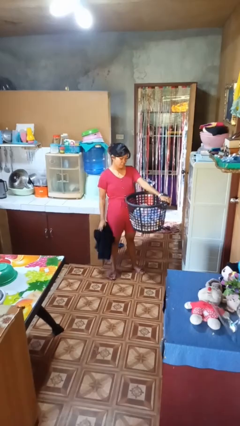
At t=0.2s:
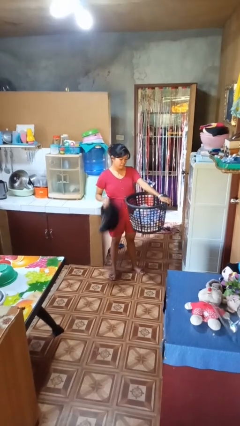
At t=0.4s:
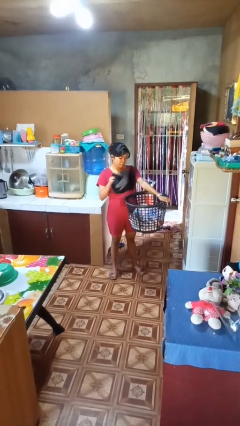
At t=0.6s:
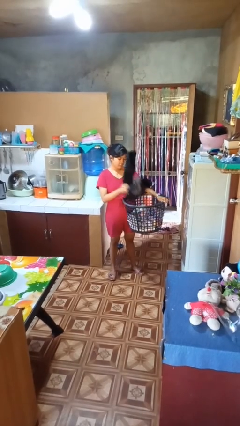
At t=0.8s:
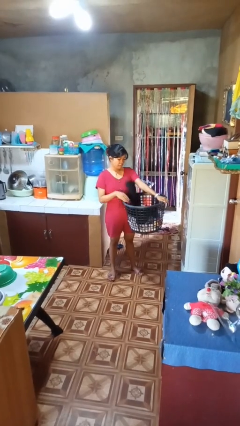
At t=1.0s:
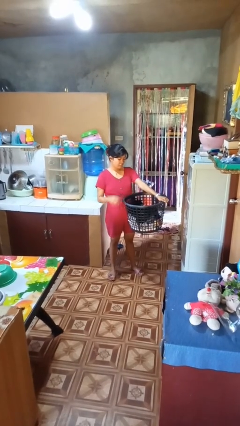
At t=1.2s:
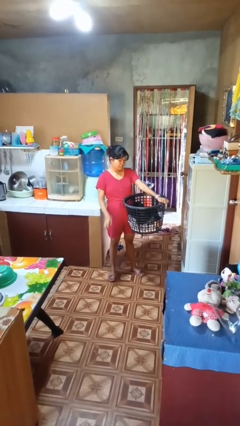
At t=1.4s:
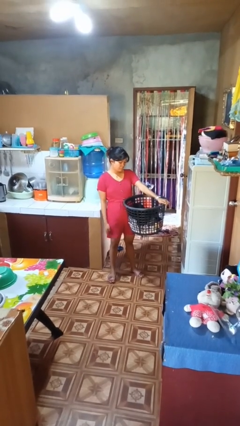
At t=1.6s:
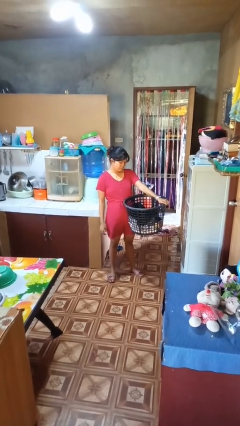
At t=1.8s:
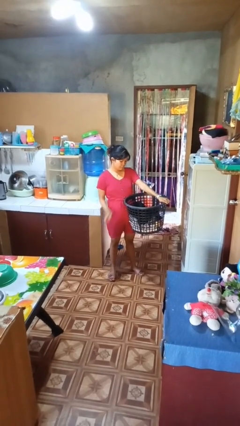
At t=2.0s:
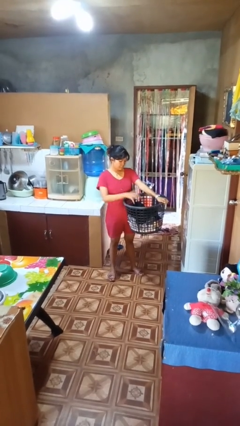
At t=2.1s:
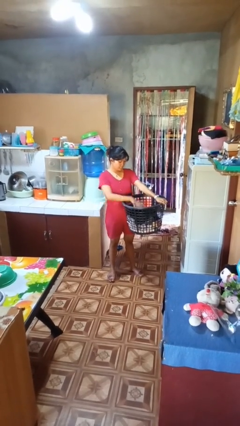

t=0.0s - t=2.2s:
person puts object into basket

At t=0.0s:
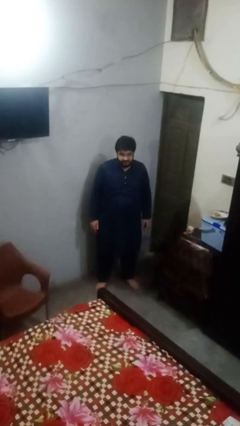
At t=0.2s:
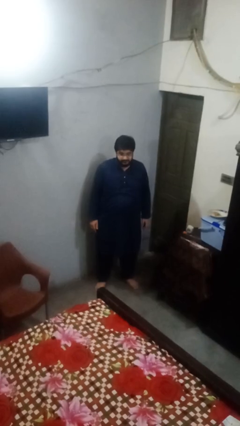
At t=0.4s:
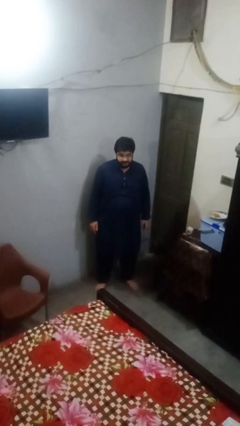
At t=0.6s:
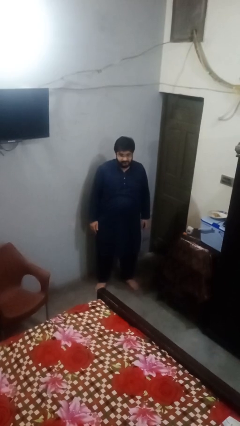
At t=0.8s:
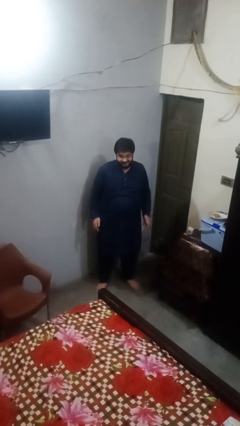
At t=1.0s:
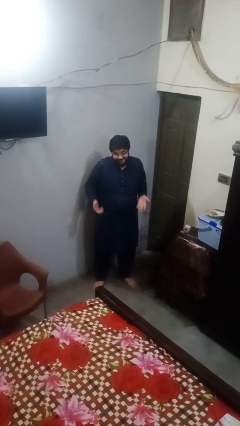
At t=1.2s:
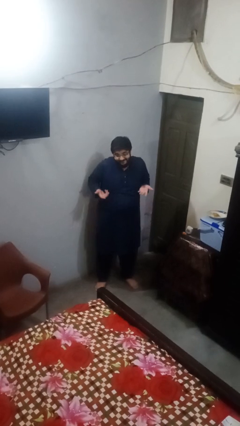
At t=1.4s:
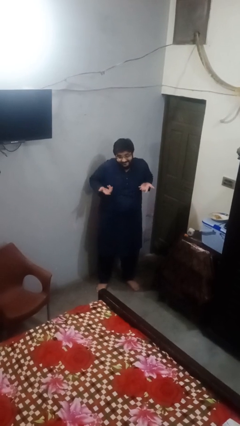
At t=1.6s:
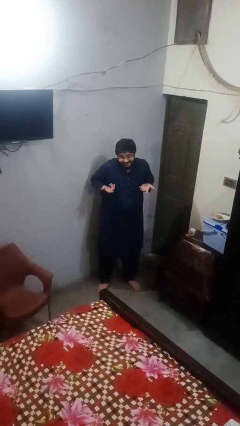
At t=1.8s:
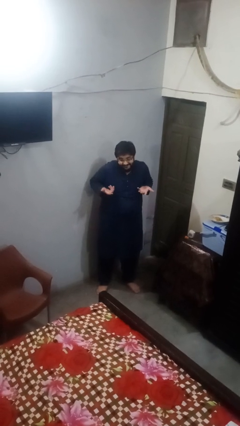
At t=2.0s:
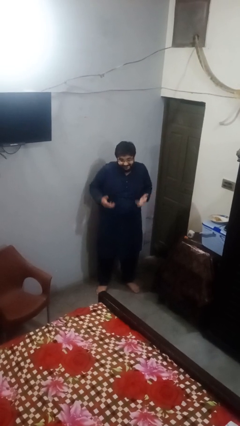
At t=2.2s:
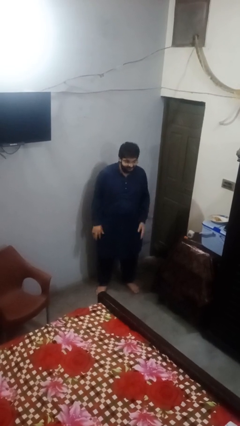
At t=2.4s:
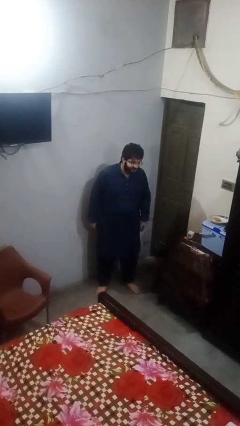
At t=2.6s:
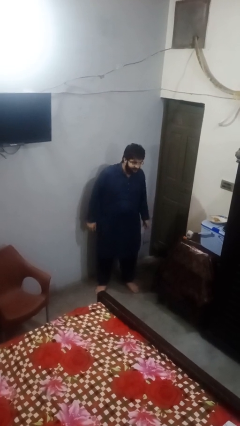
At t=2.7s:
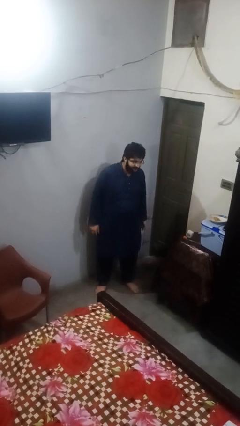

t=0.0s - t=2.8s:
person shrugs

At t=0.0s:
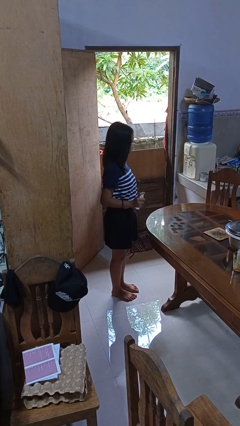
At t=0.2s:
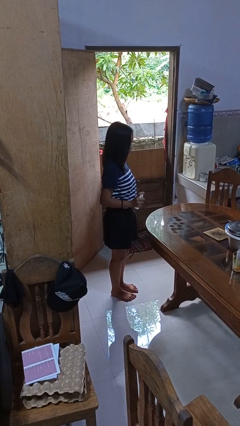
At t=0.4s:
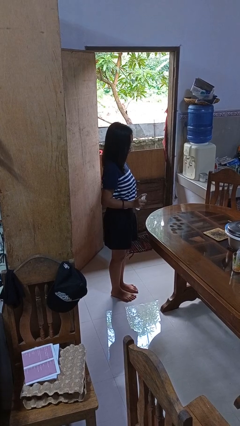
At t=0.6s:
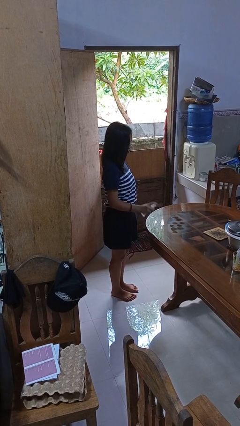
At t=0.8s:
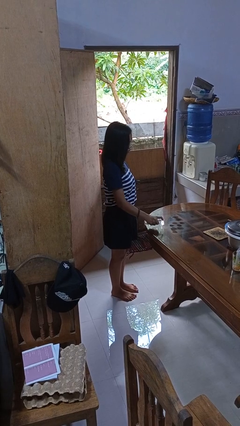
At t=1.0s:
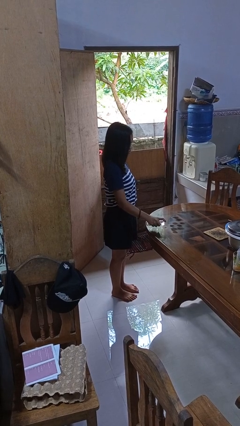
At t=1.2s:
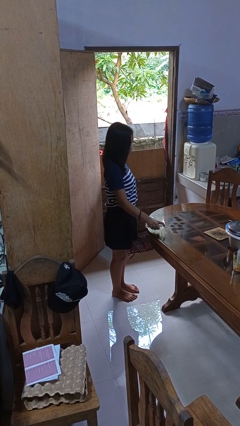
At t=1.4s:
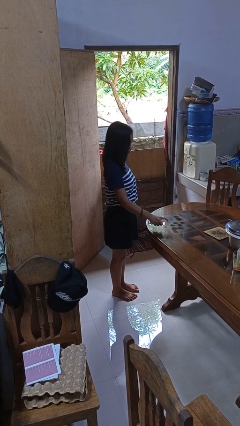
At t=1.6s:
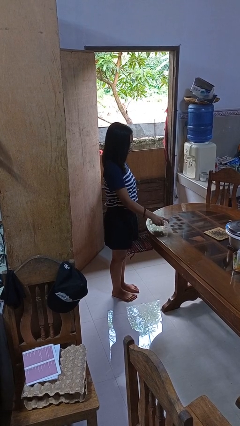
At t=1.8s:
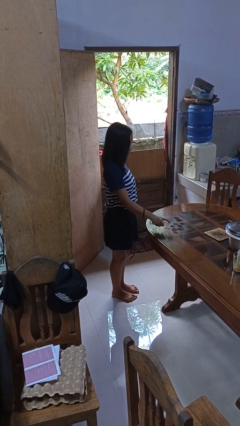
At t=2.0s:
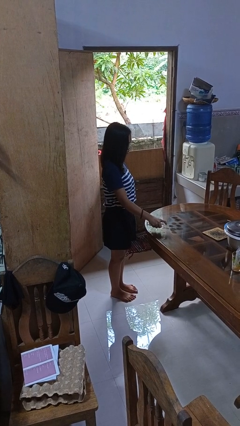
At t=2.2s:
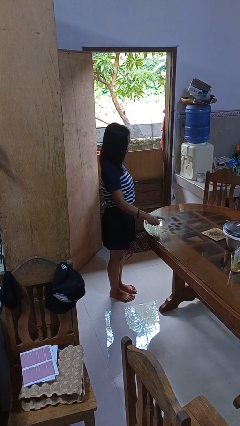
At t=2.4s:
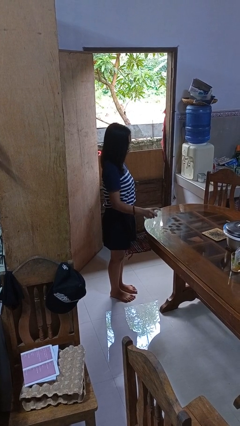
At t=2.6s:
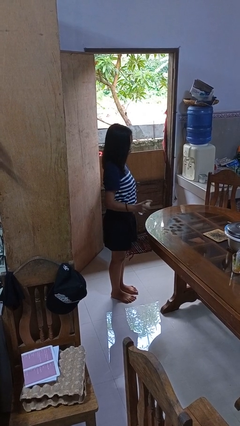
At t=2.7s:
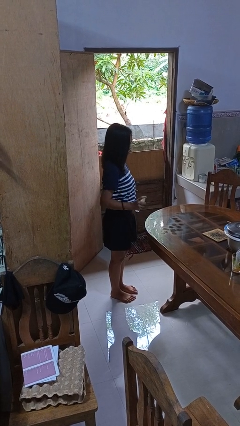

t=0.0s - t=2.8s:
person sprays from bottle

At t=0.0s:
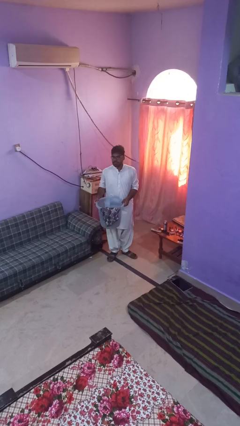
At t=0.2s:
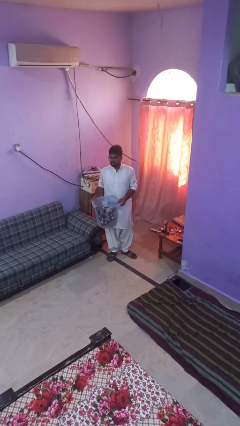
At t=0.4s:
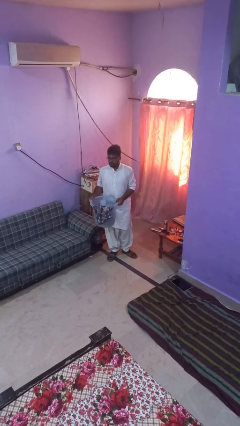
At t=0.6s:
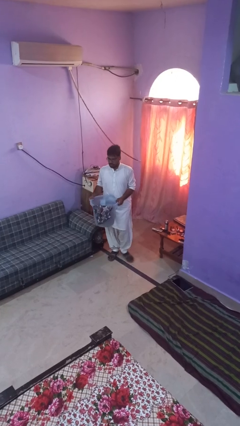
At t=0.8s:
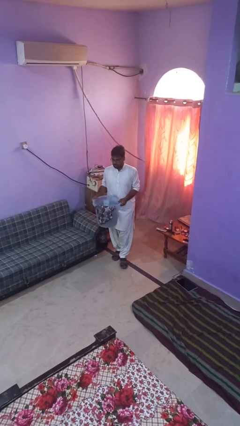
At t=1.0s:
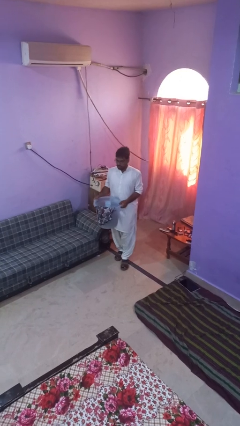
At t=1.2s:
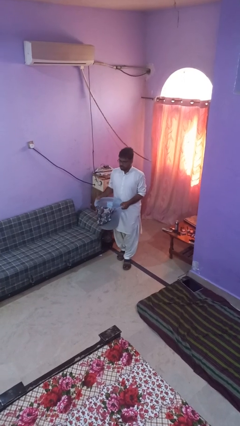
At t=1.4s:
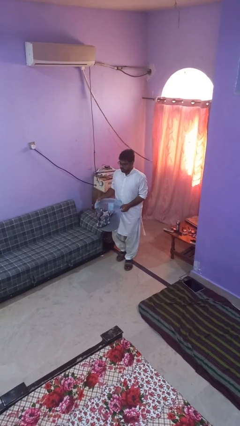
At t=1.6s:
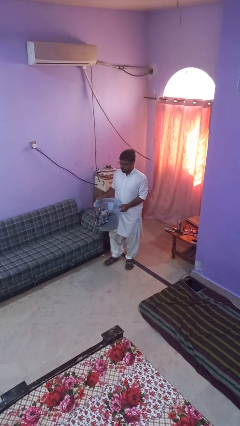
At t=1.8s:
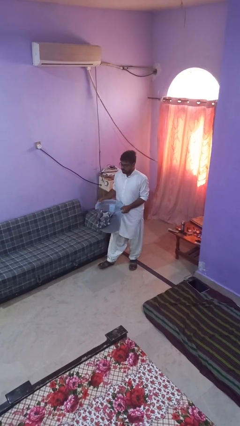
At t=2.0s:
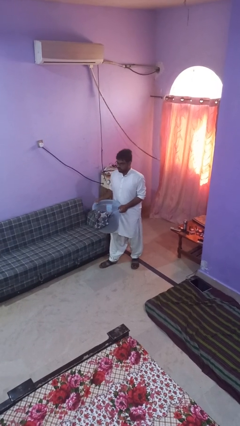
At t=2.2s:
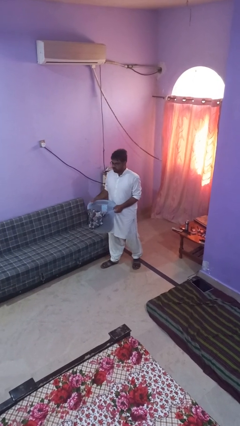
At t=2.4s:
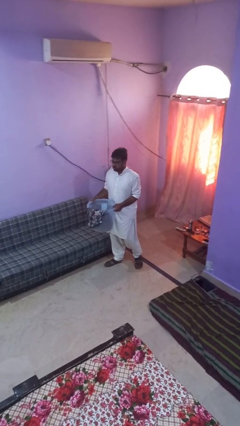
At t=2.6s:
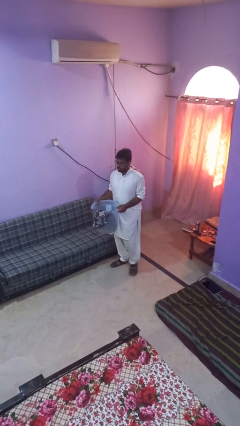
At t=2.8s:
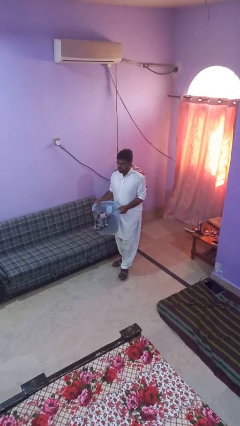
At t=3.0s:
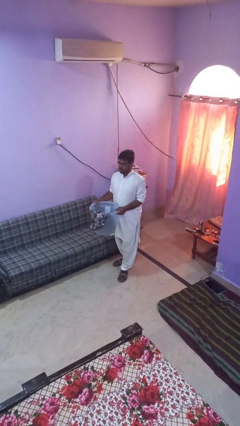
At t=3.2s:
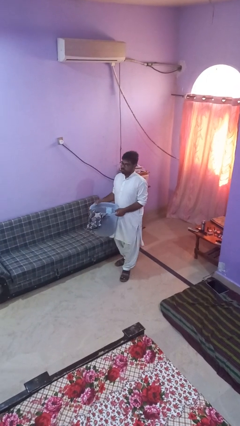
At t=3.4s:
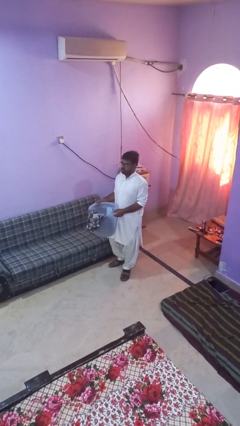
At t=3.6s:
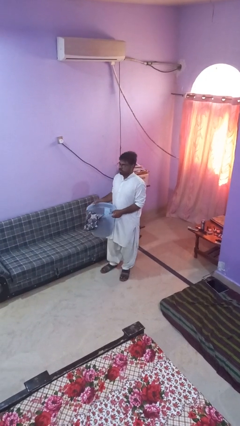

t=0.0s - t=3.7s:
person carries laundry basket

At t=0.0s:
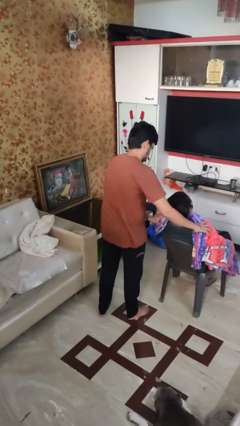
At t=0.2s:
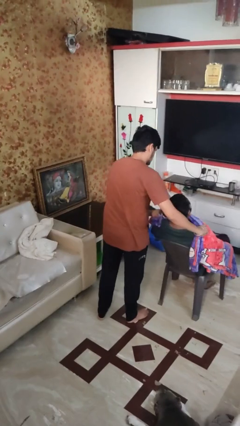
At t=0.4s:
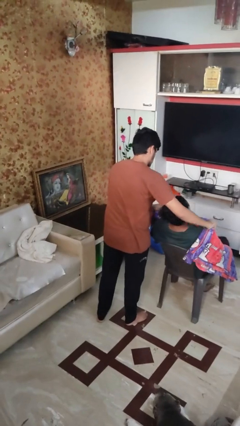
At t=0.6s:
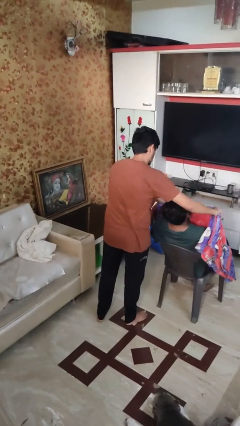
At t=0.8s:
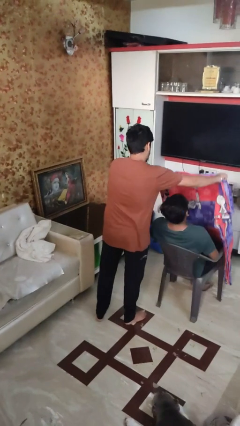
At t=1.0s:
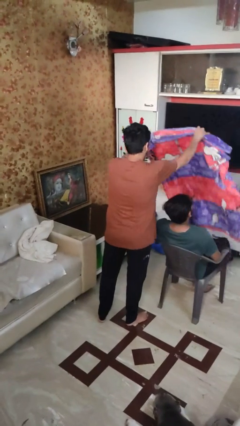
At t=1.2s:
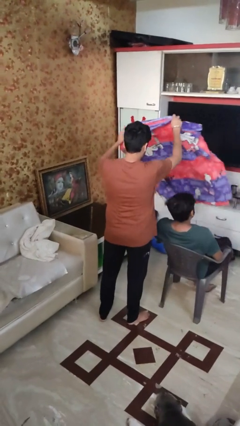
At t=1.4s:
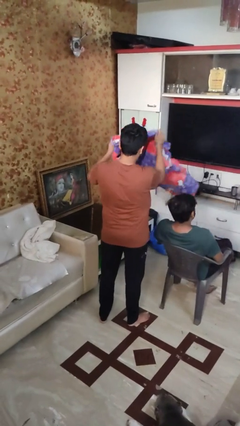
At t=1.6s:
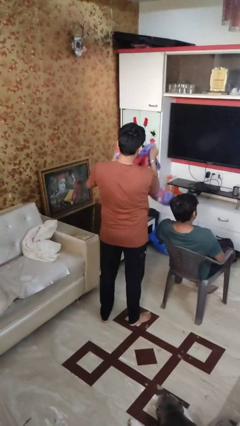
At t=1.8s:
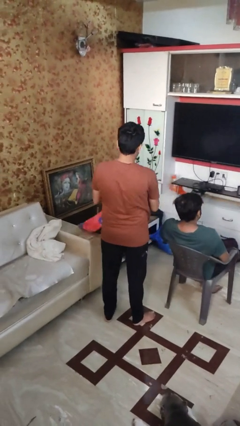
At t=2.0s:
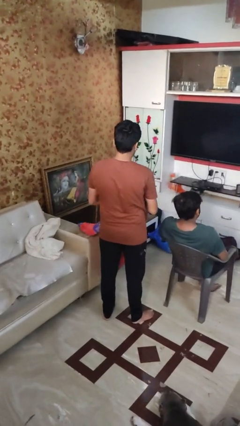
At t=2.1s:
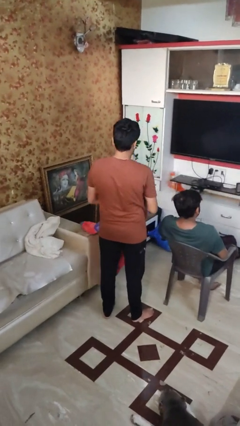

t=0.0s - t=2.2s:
person uncovers friend with blanket

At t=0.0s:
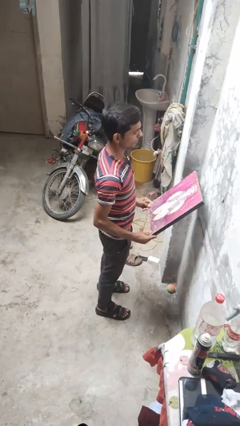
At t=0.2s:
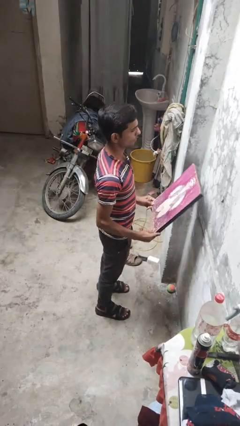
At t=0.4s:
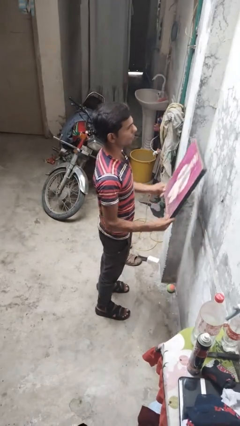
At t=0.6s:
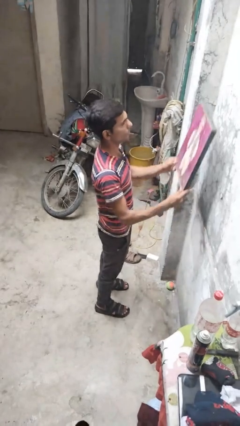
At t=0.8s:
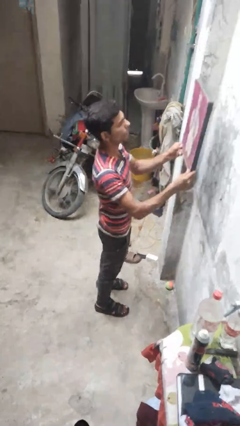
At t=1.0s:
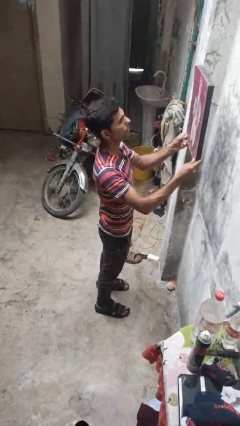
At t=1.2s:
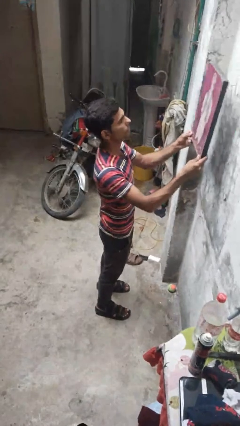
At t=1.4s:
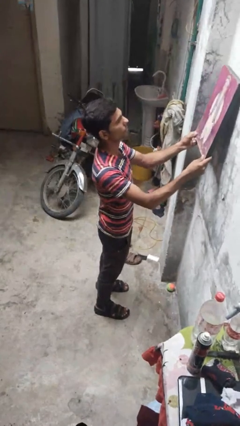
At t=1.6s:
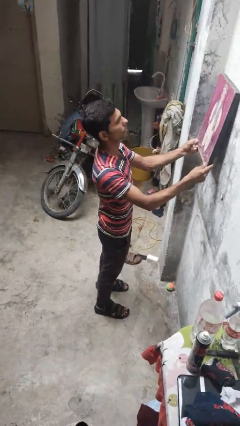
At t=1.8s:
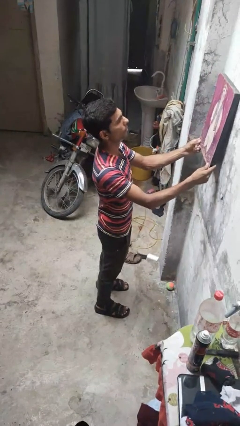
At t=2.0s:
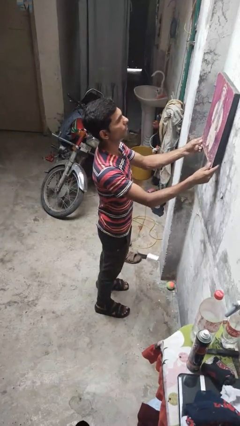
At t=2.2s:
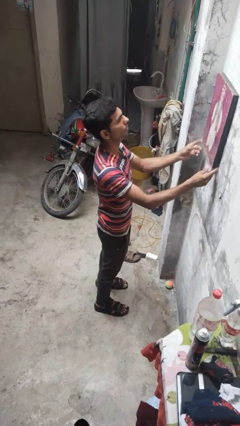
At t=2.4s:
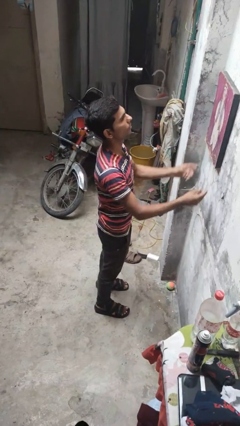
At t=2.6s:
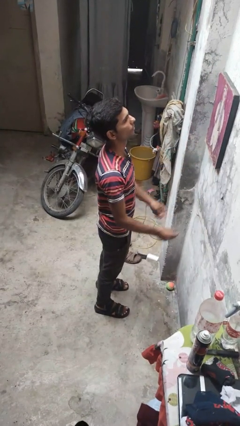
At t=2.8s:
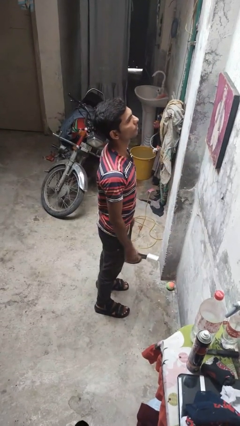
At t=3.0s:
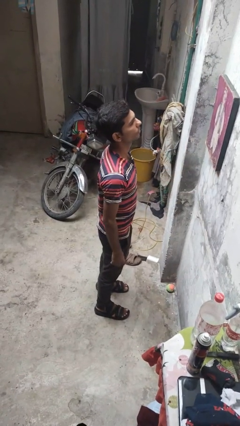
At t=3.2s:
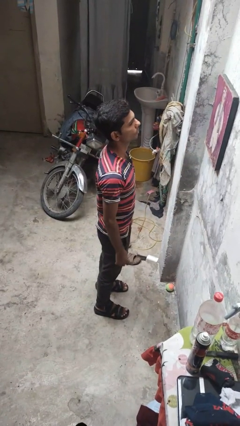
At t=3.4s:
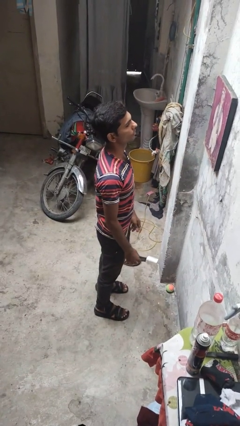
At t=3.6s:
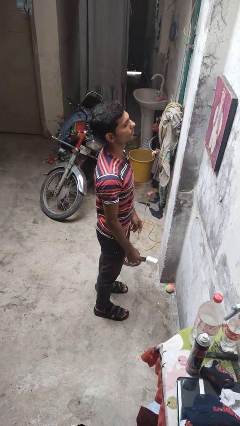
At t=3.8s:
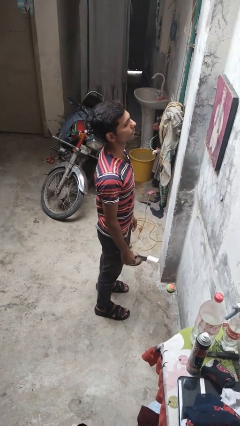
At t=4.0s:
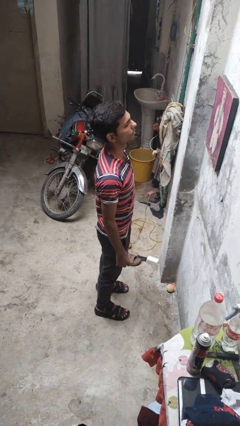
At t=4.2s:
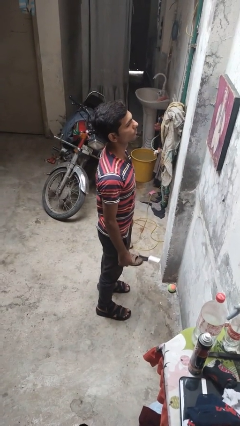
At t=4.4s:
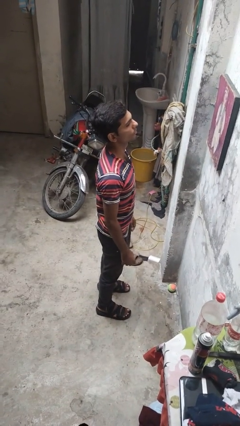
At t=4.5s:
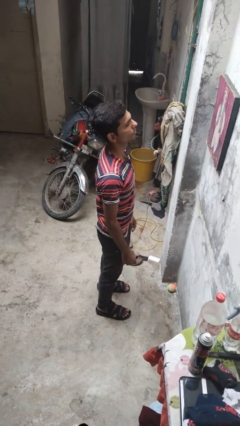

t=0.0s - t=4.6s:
person puts up picture frame
